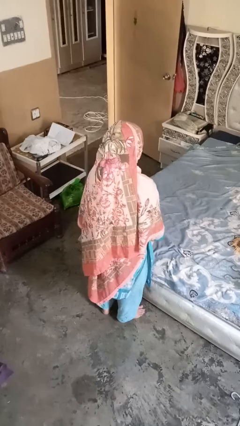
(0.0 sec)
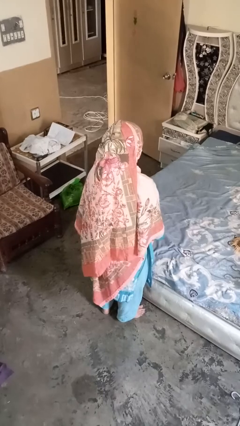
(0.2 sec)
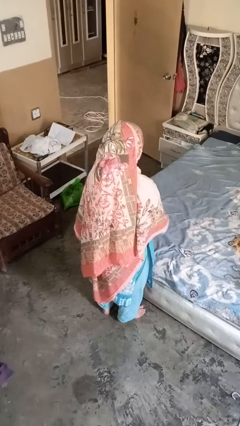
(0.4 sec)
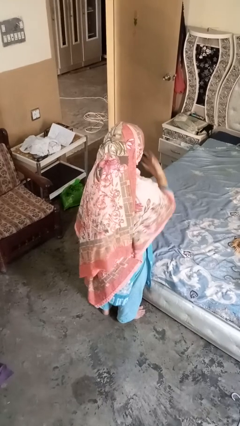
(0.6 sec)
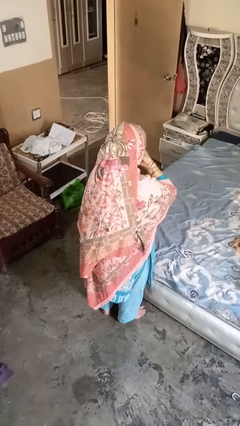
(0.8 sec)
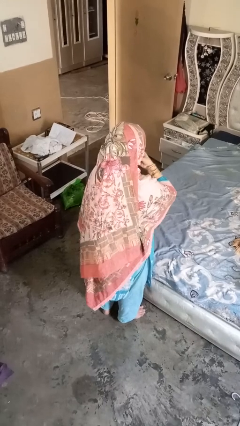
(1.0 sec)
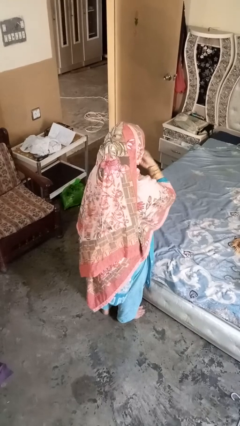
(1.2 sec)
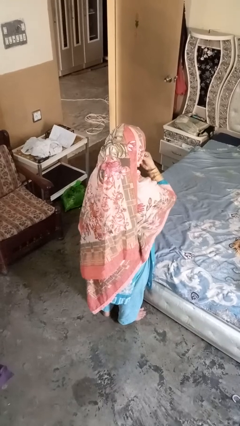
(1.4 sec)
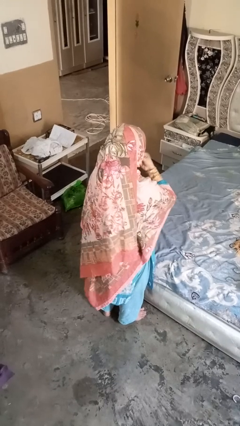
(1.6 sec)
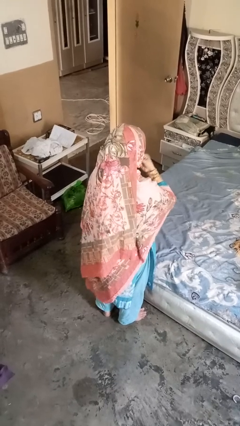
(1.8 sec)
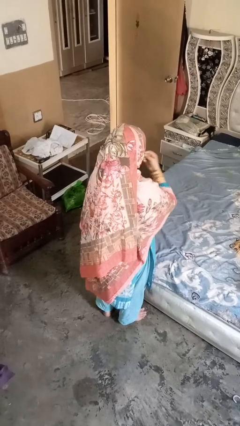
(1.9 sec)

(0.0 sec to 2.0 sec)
person strokes chin

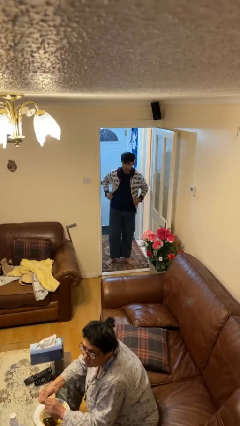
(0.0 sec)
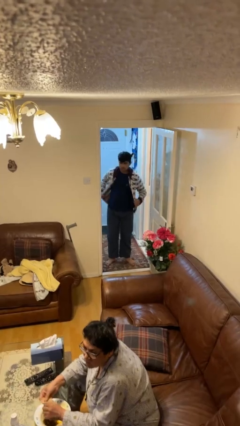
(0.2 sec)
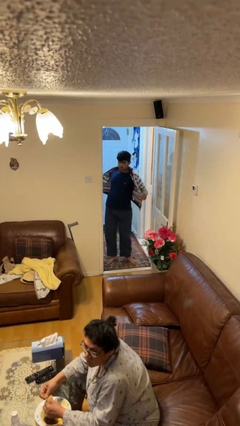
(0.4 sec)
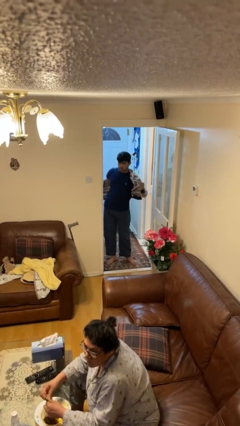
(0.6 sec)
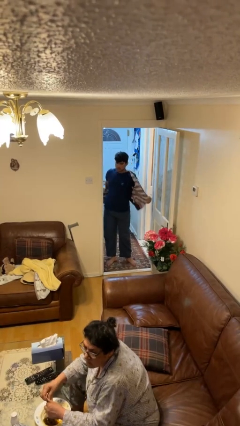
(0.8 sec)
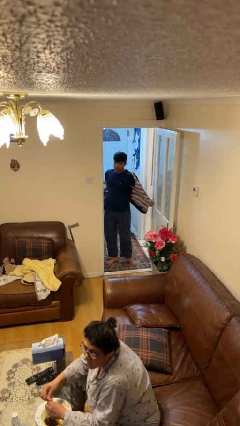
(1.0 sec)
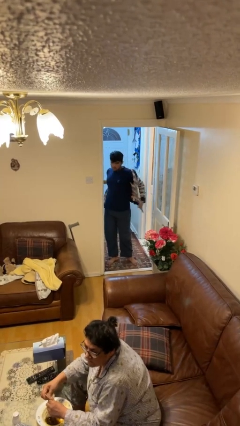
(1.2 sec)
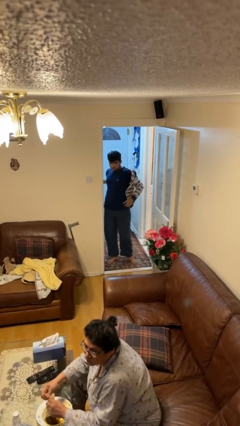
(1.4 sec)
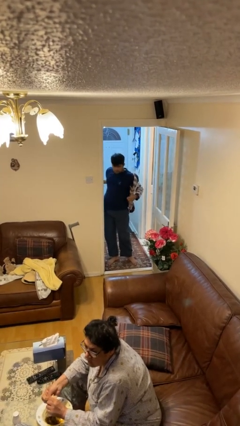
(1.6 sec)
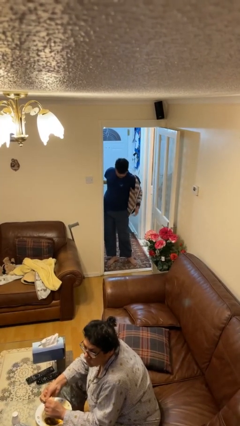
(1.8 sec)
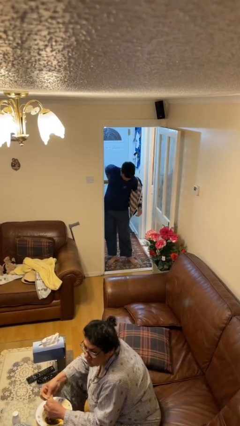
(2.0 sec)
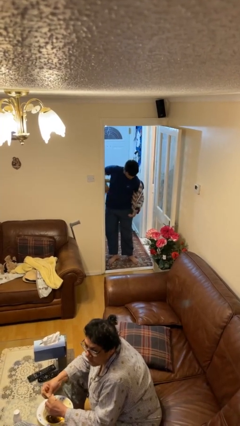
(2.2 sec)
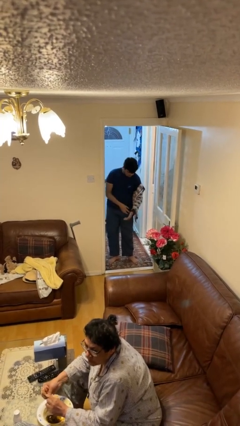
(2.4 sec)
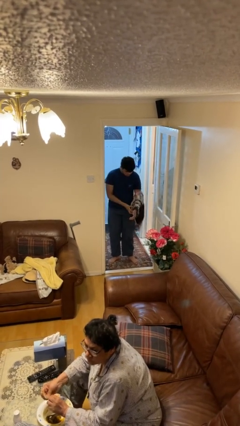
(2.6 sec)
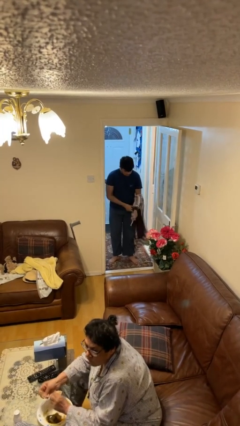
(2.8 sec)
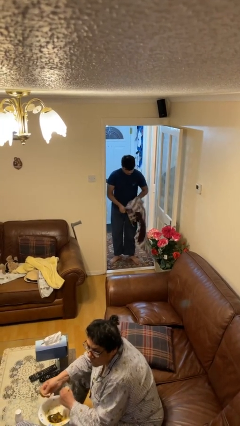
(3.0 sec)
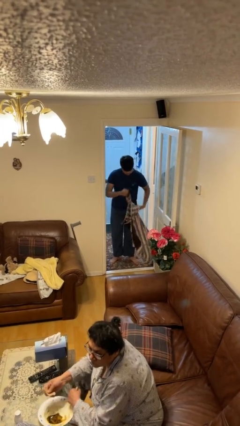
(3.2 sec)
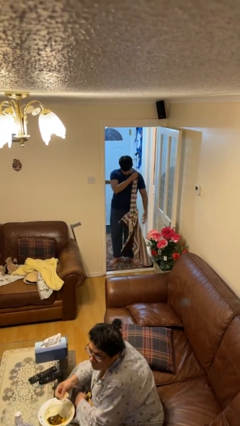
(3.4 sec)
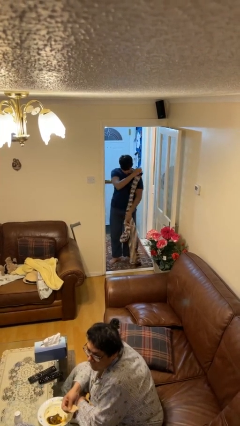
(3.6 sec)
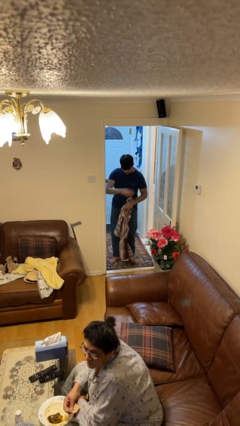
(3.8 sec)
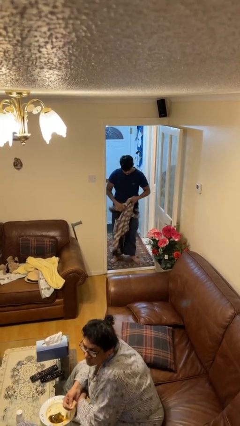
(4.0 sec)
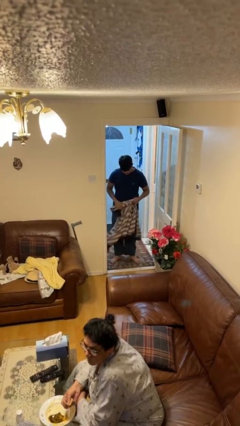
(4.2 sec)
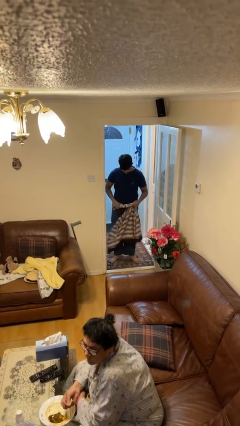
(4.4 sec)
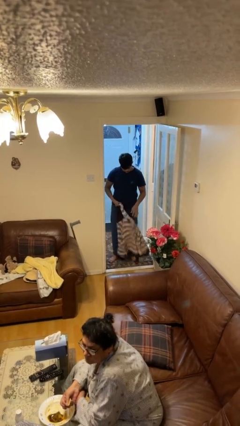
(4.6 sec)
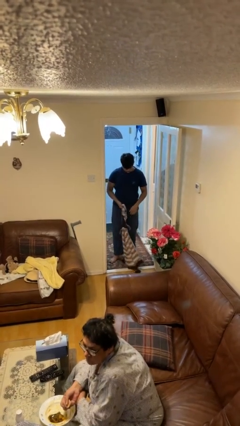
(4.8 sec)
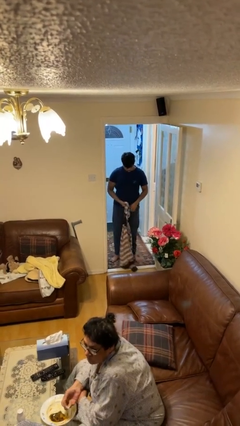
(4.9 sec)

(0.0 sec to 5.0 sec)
person takes off hoodie

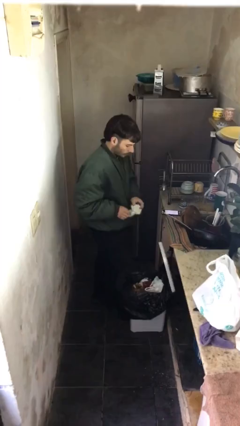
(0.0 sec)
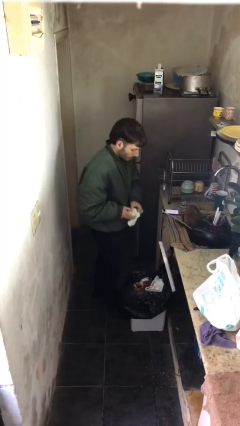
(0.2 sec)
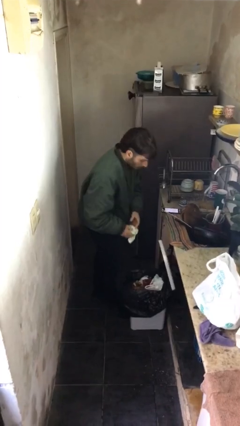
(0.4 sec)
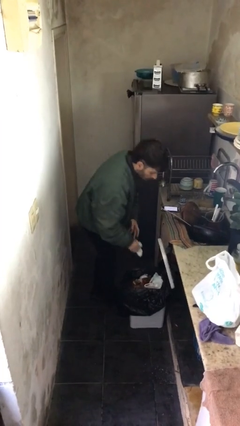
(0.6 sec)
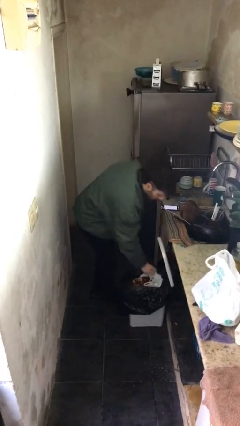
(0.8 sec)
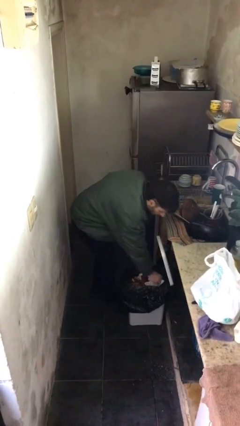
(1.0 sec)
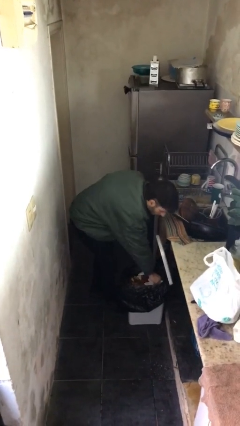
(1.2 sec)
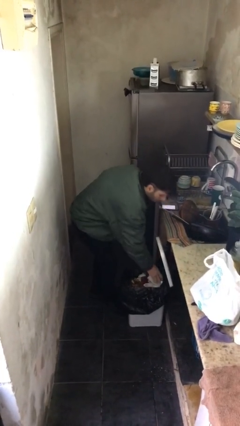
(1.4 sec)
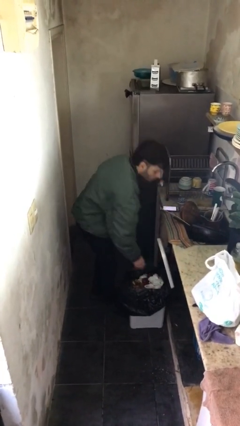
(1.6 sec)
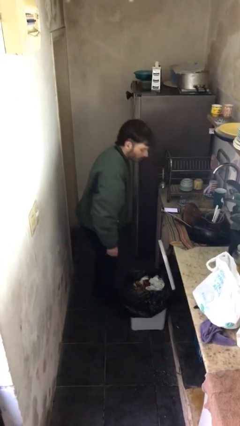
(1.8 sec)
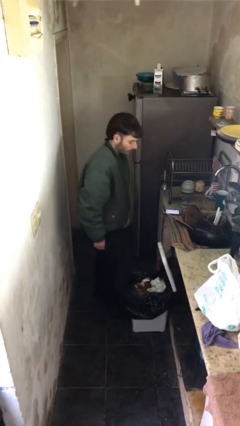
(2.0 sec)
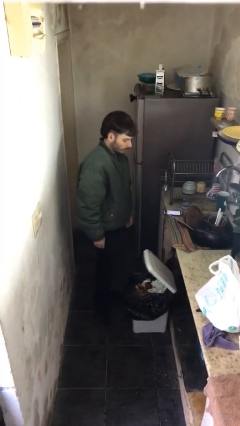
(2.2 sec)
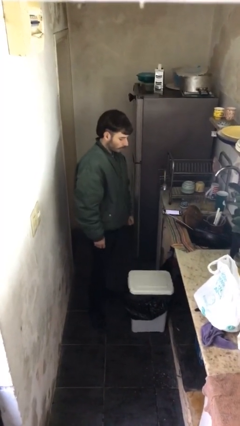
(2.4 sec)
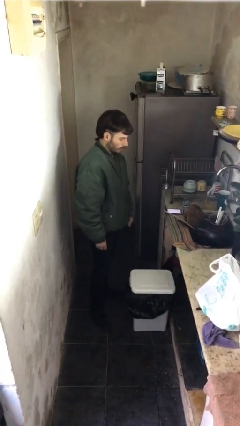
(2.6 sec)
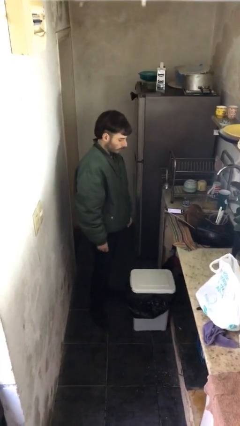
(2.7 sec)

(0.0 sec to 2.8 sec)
person discards trash

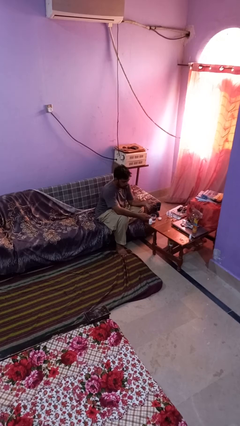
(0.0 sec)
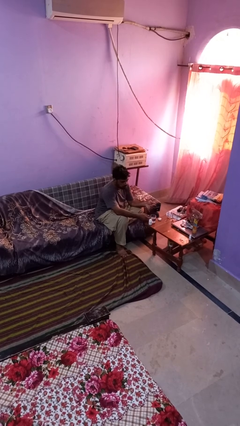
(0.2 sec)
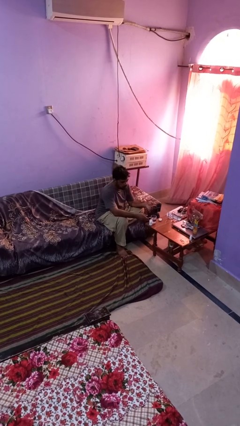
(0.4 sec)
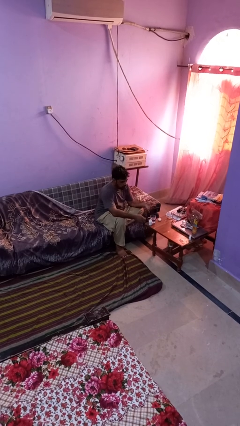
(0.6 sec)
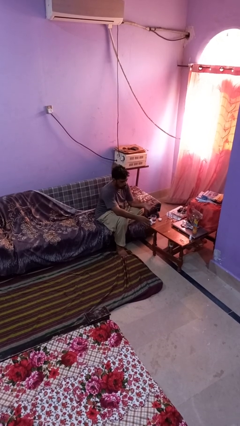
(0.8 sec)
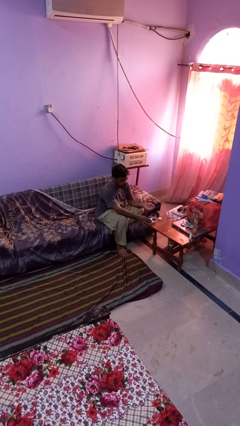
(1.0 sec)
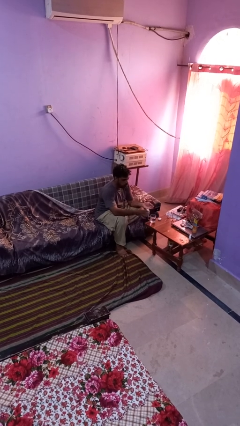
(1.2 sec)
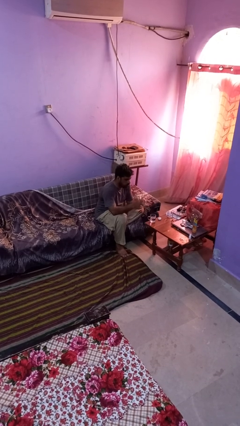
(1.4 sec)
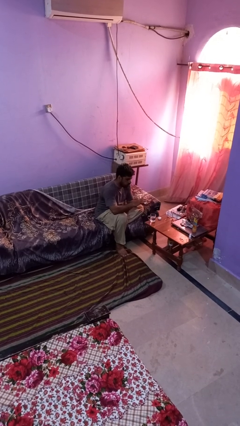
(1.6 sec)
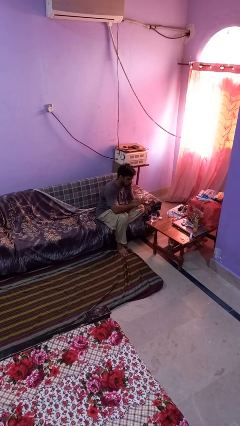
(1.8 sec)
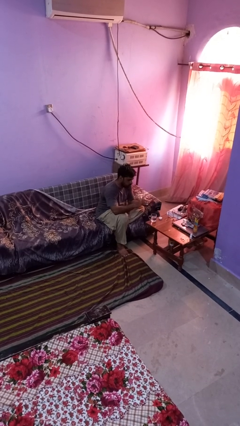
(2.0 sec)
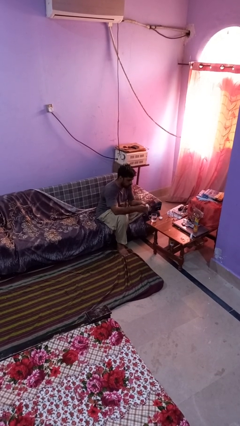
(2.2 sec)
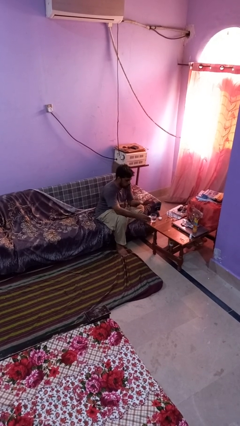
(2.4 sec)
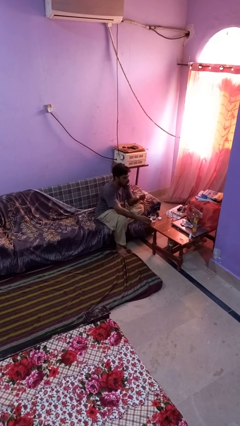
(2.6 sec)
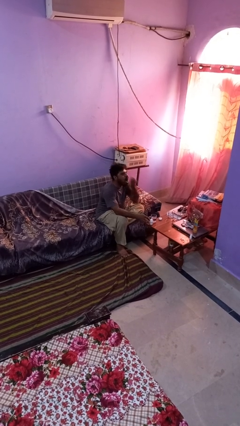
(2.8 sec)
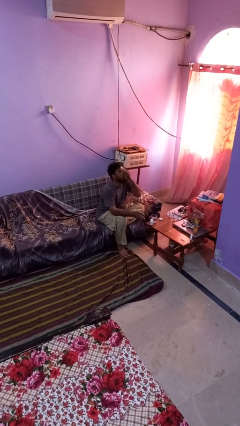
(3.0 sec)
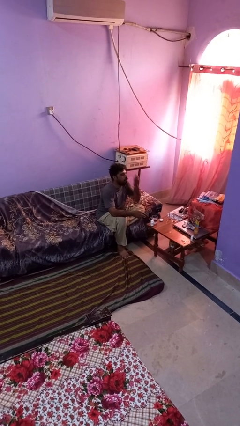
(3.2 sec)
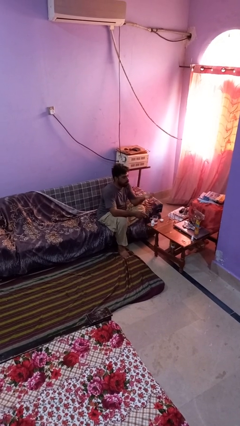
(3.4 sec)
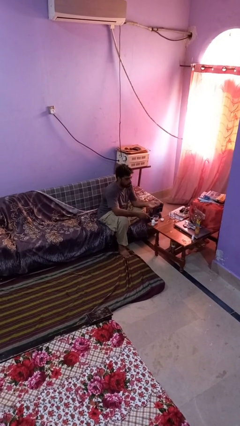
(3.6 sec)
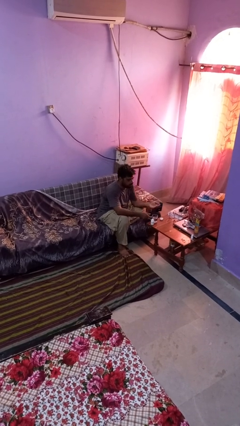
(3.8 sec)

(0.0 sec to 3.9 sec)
person takes medicine pills

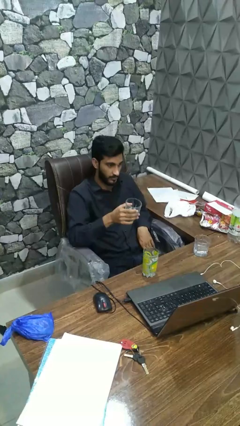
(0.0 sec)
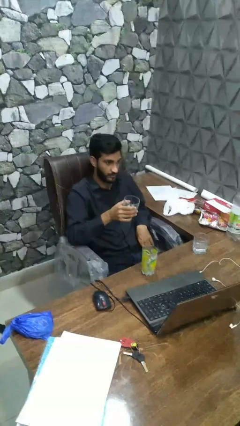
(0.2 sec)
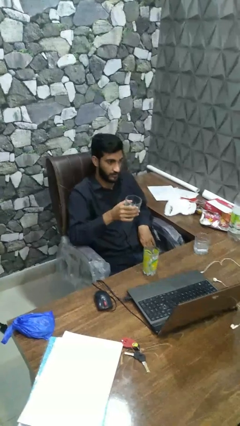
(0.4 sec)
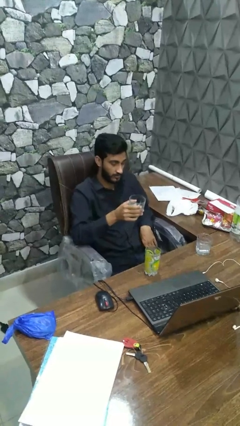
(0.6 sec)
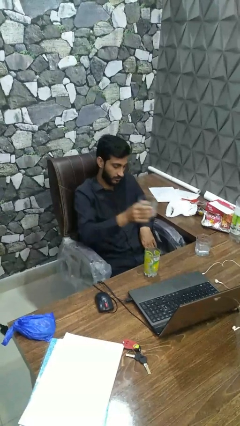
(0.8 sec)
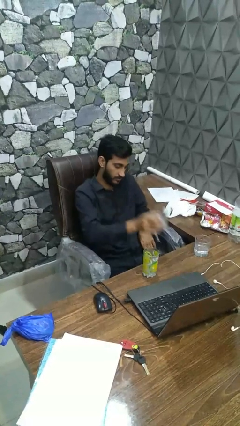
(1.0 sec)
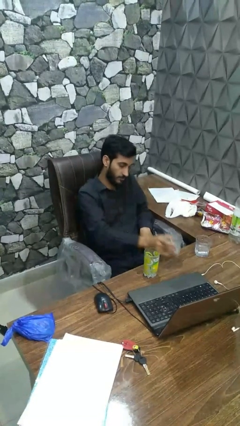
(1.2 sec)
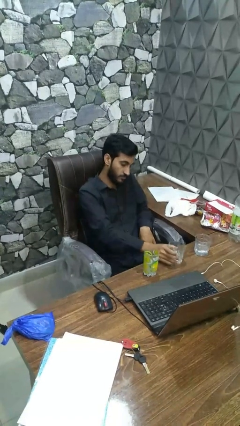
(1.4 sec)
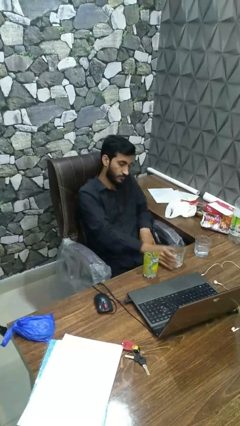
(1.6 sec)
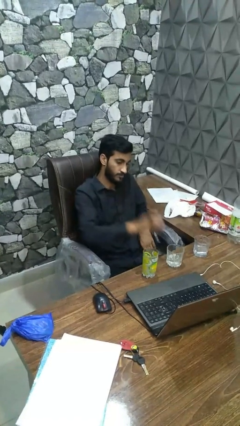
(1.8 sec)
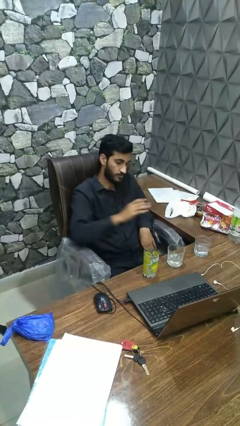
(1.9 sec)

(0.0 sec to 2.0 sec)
person puts down object on table

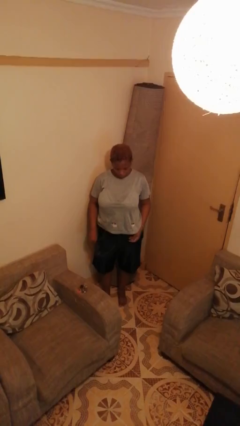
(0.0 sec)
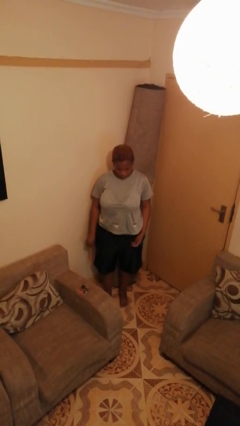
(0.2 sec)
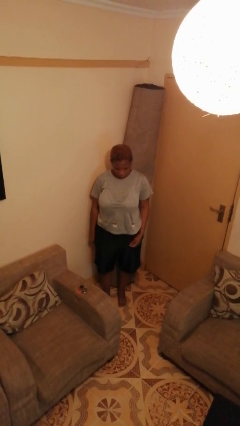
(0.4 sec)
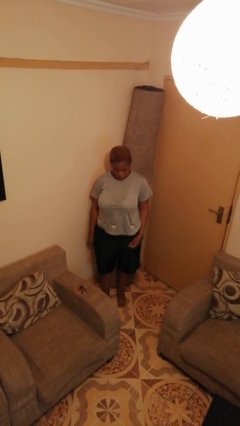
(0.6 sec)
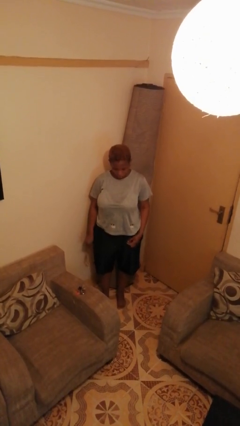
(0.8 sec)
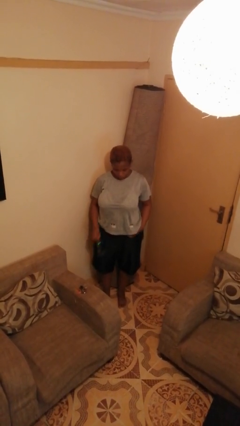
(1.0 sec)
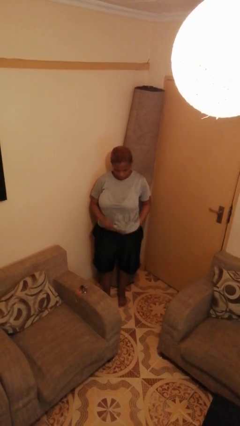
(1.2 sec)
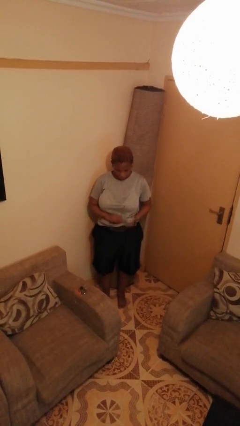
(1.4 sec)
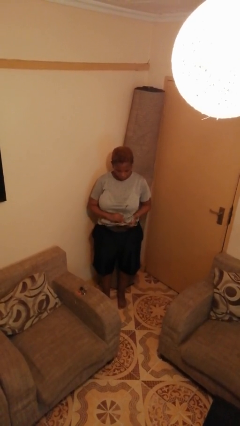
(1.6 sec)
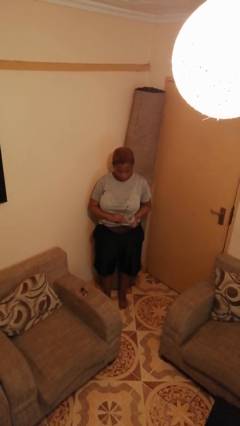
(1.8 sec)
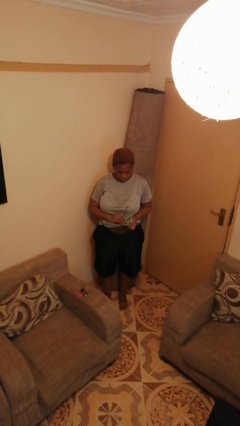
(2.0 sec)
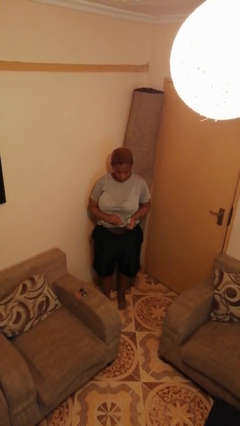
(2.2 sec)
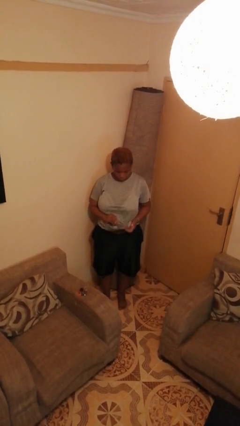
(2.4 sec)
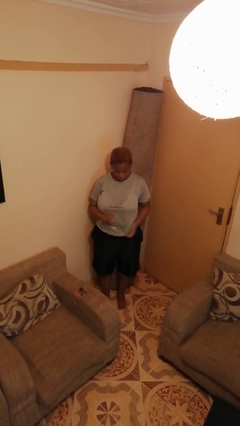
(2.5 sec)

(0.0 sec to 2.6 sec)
person cleans eyeglasses
